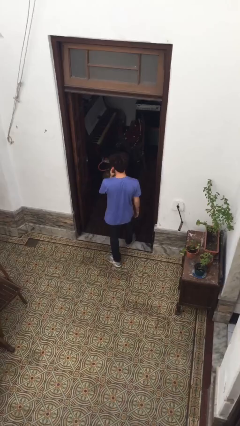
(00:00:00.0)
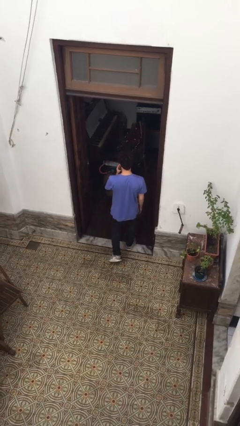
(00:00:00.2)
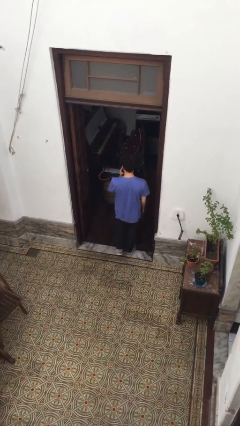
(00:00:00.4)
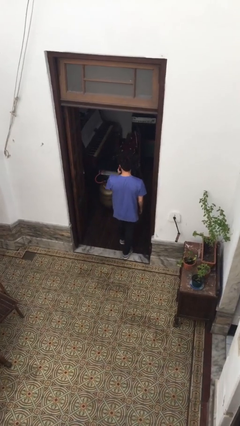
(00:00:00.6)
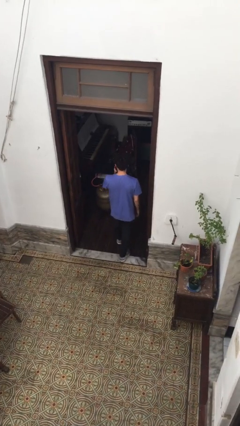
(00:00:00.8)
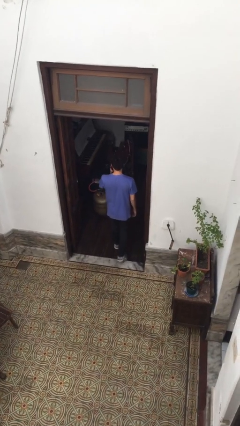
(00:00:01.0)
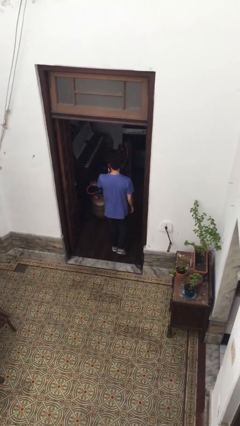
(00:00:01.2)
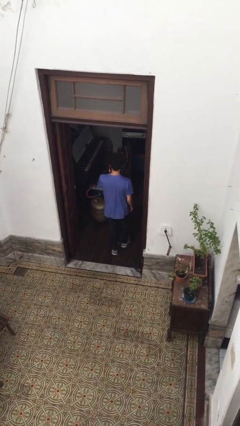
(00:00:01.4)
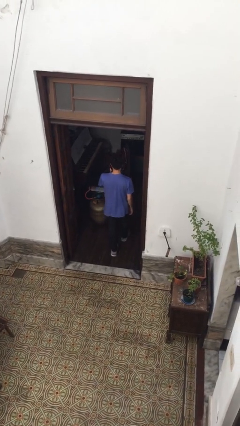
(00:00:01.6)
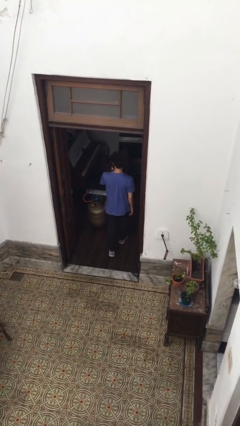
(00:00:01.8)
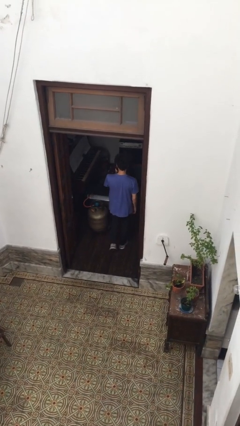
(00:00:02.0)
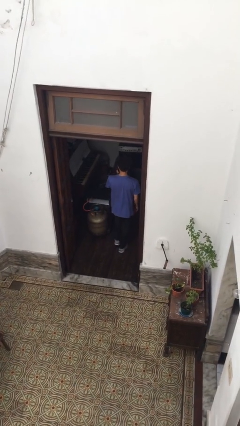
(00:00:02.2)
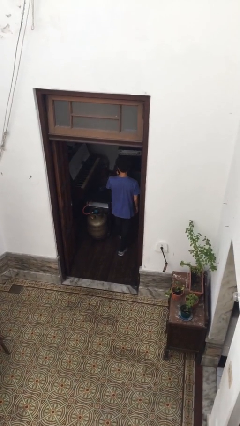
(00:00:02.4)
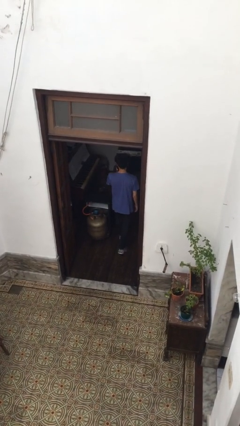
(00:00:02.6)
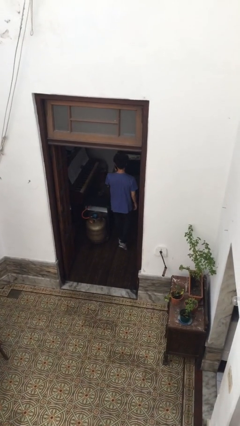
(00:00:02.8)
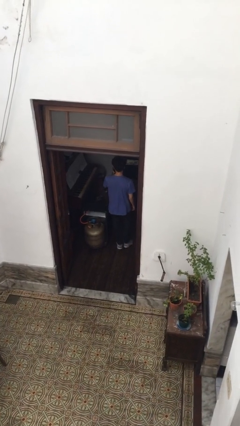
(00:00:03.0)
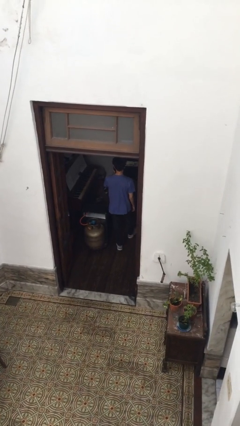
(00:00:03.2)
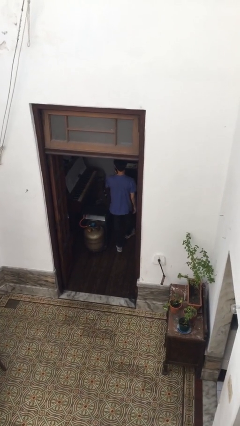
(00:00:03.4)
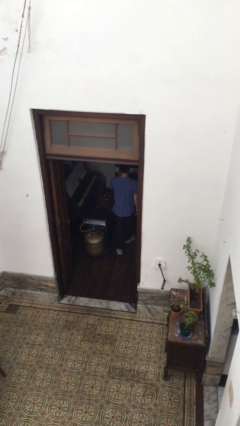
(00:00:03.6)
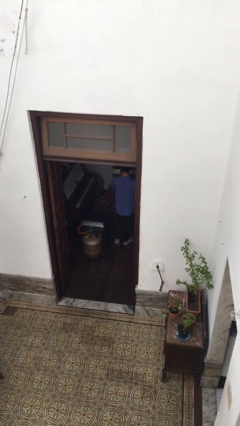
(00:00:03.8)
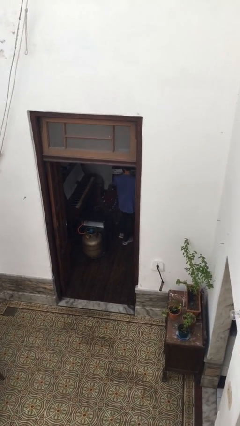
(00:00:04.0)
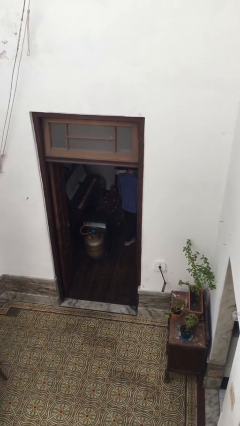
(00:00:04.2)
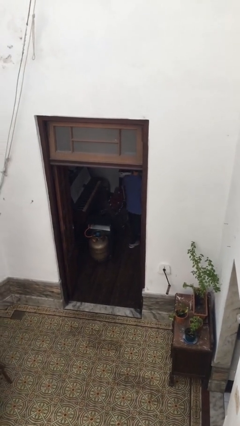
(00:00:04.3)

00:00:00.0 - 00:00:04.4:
person exits scene through structure

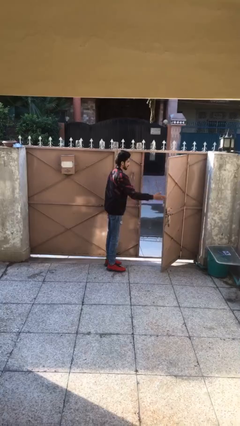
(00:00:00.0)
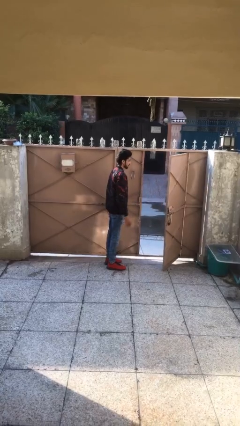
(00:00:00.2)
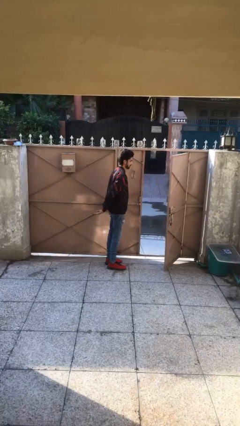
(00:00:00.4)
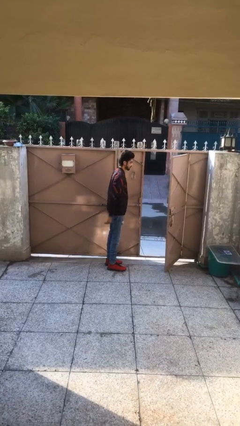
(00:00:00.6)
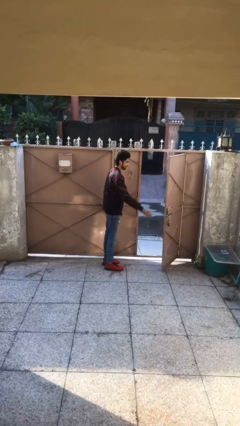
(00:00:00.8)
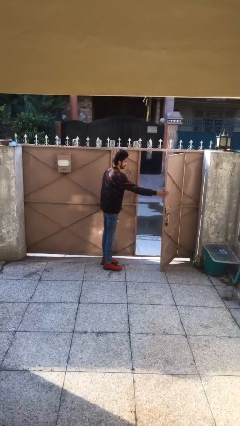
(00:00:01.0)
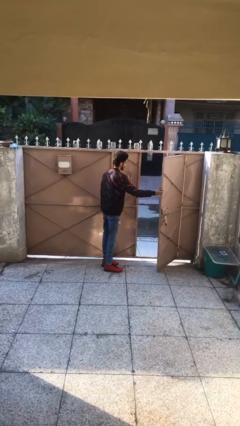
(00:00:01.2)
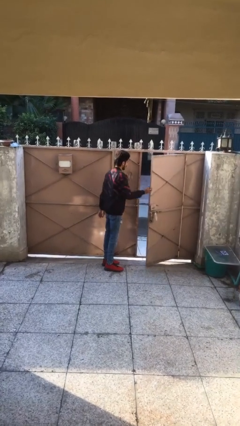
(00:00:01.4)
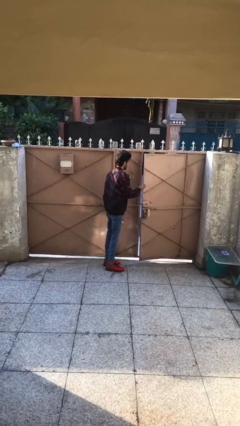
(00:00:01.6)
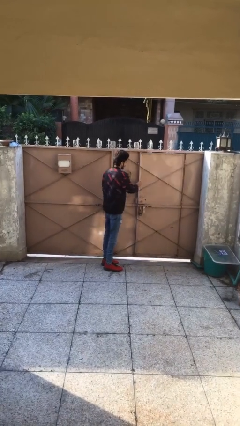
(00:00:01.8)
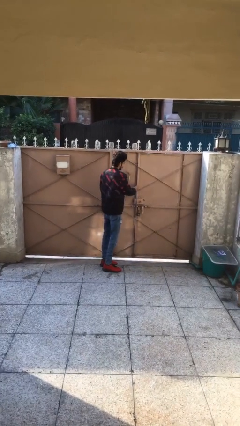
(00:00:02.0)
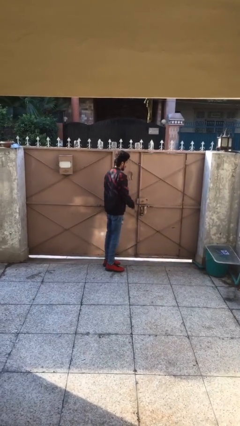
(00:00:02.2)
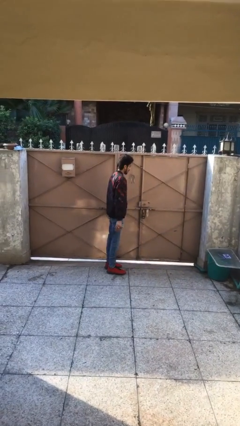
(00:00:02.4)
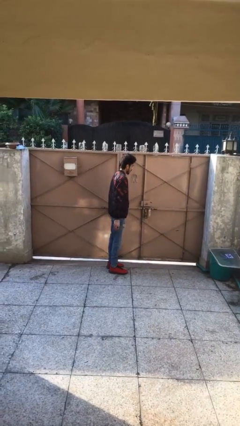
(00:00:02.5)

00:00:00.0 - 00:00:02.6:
person closes facility door

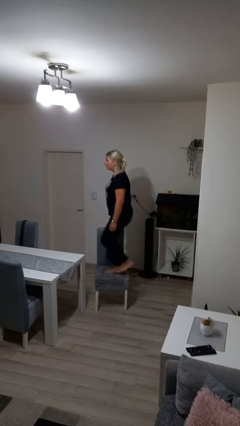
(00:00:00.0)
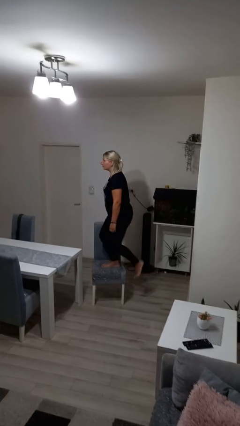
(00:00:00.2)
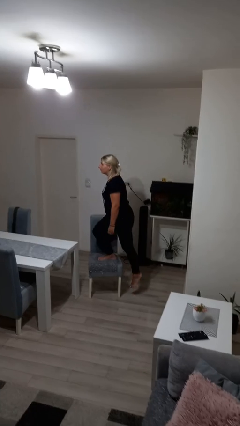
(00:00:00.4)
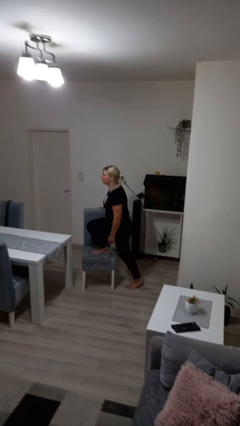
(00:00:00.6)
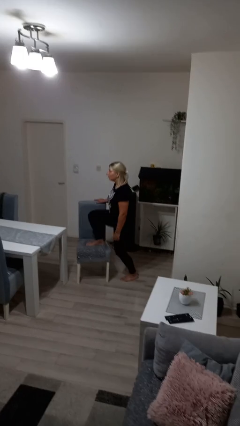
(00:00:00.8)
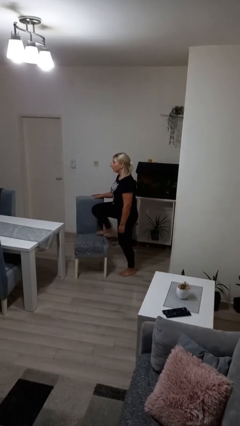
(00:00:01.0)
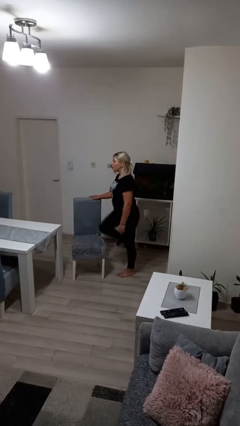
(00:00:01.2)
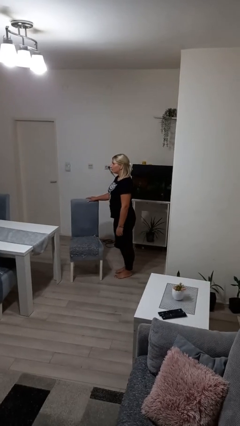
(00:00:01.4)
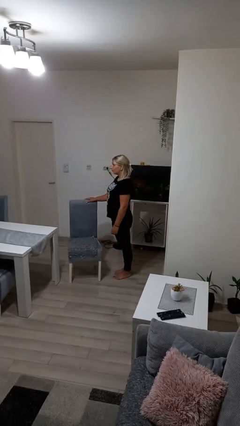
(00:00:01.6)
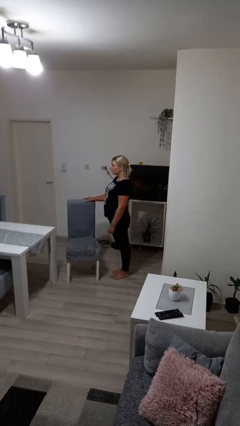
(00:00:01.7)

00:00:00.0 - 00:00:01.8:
person climbs off chair

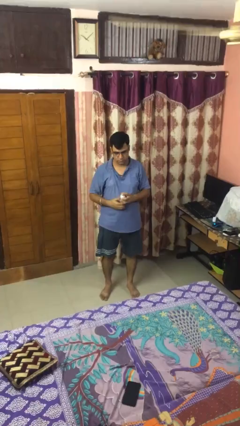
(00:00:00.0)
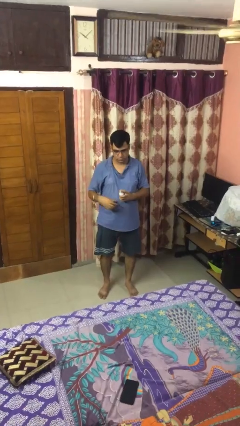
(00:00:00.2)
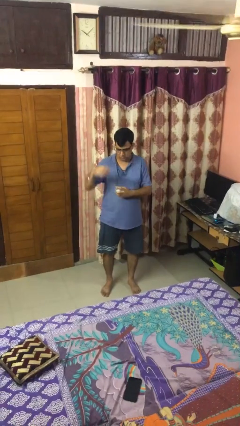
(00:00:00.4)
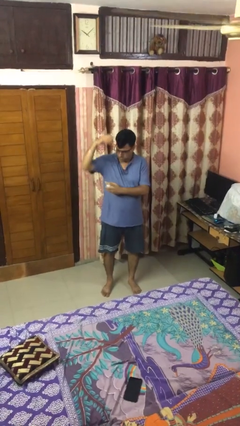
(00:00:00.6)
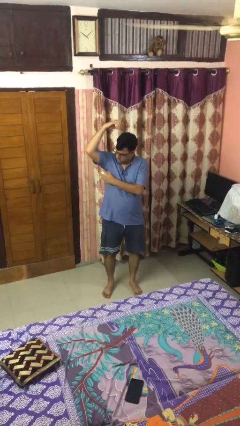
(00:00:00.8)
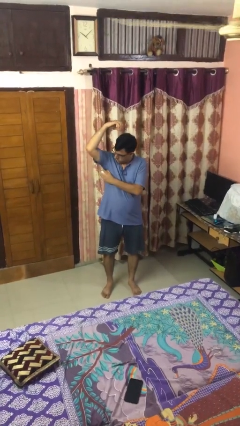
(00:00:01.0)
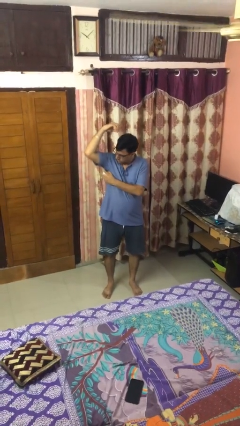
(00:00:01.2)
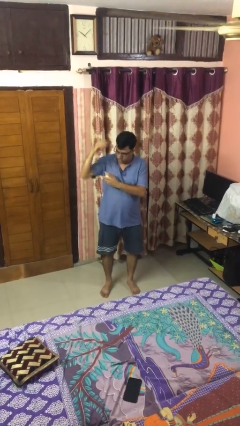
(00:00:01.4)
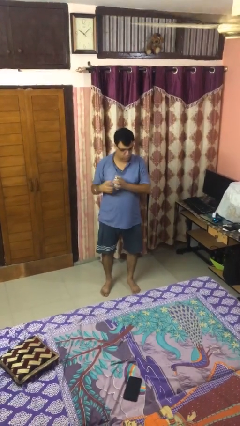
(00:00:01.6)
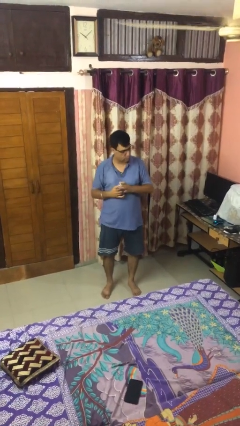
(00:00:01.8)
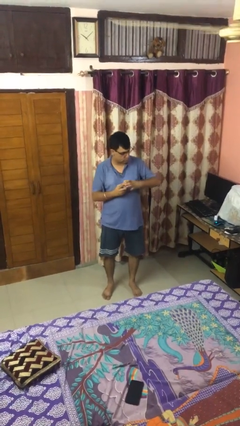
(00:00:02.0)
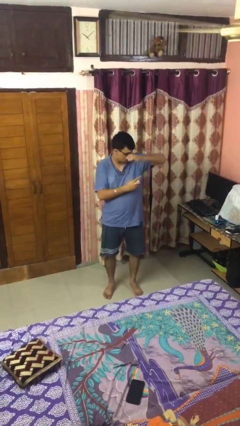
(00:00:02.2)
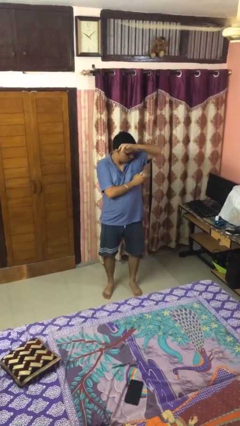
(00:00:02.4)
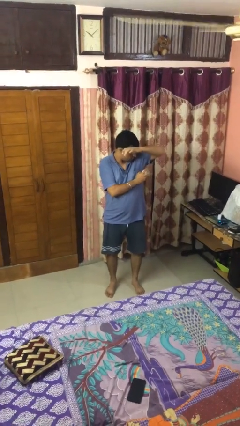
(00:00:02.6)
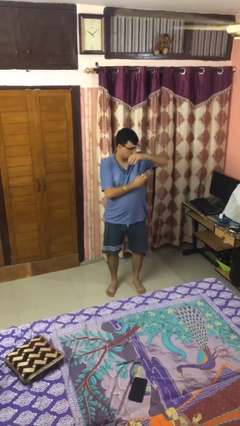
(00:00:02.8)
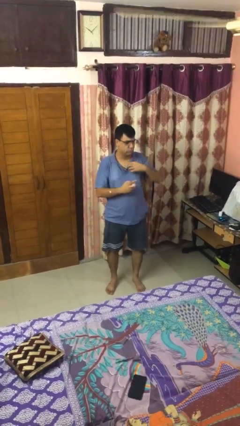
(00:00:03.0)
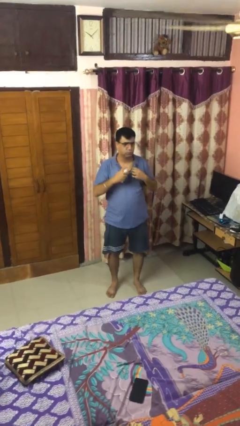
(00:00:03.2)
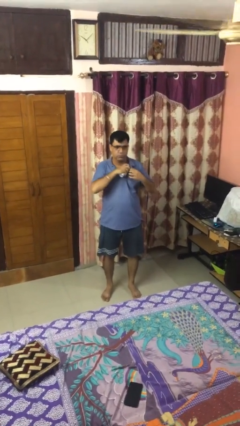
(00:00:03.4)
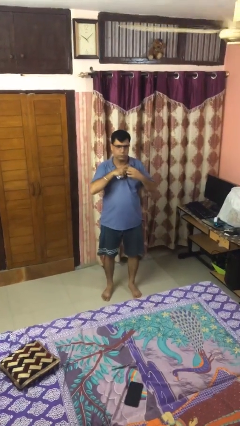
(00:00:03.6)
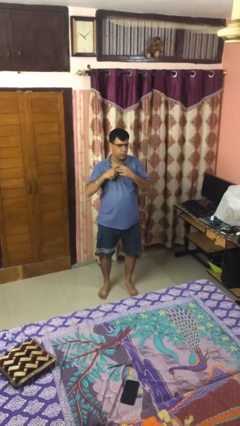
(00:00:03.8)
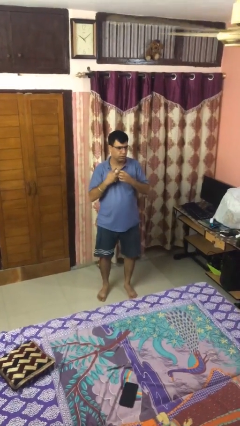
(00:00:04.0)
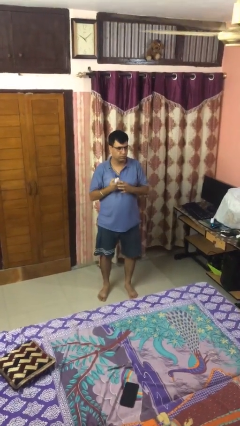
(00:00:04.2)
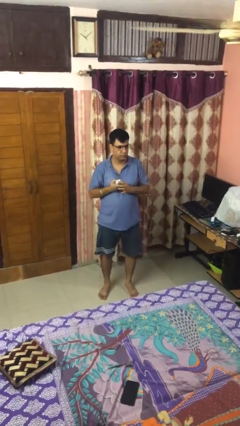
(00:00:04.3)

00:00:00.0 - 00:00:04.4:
person applies deodorant

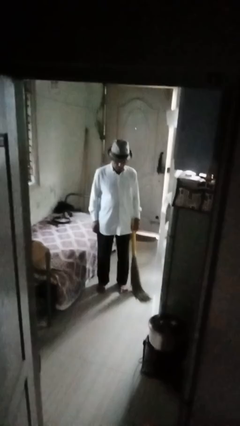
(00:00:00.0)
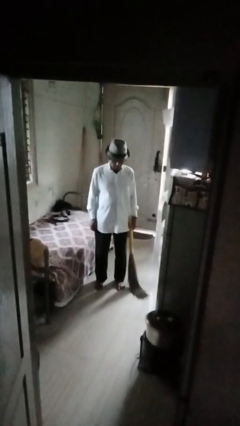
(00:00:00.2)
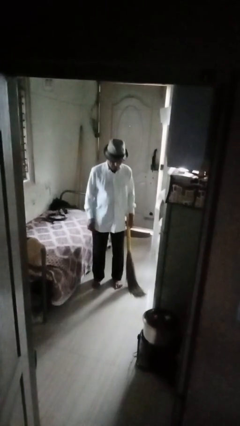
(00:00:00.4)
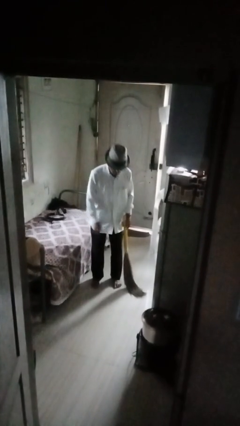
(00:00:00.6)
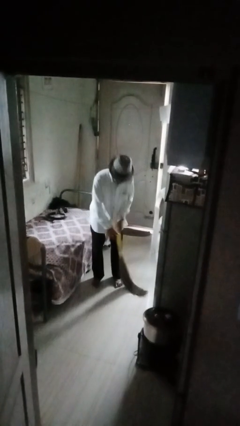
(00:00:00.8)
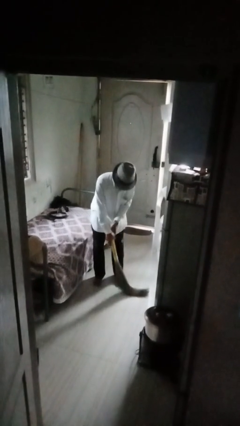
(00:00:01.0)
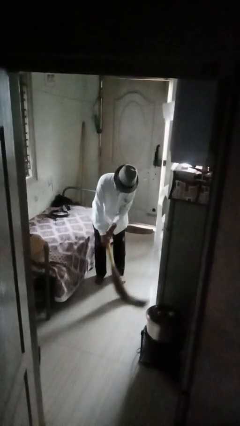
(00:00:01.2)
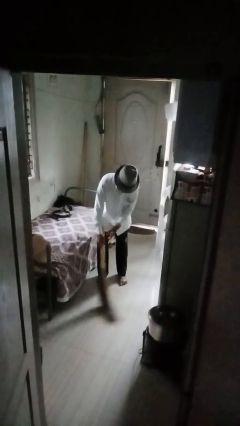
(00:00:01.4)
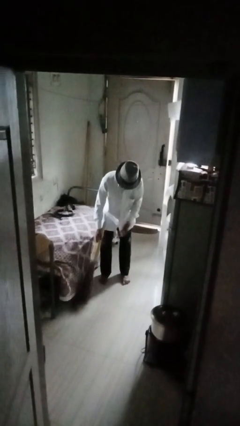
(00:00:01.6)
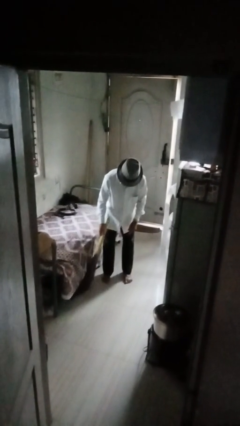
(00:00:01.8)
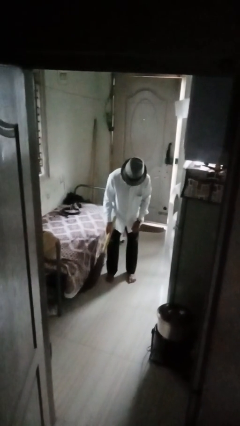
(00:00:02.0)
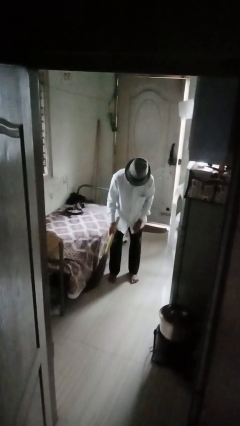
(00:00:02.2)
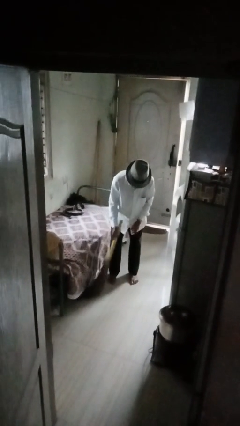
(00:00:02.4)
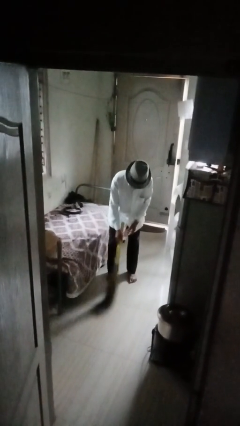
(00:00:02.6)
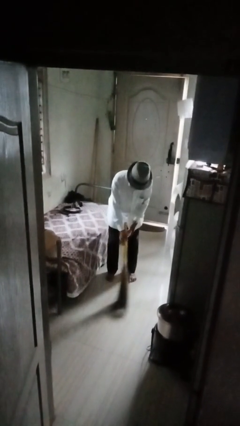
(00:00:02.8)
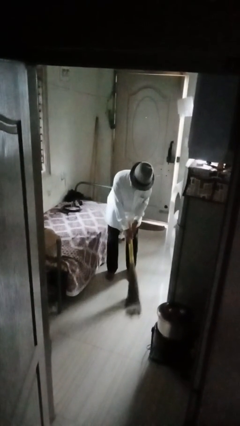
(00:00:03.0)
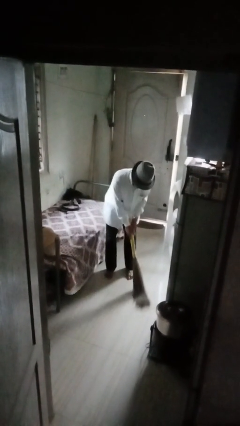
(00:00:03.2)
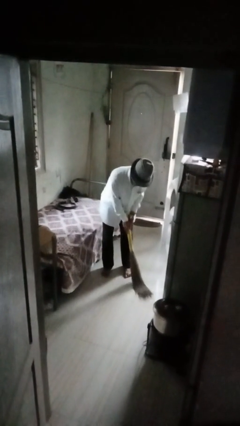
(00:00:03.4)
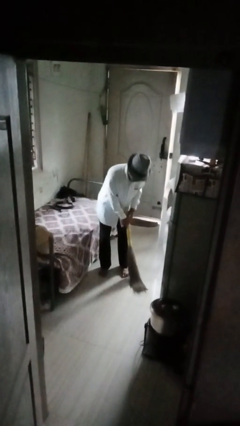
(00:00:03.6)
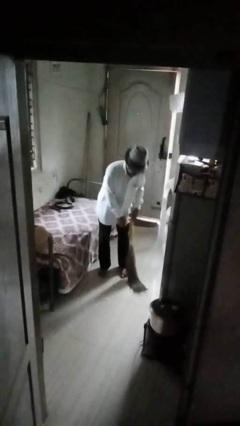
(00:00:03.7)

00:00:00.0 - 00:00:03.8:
person sweeps floor
